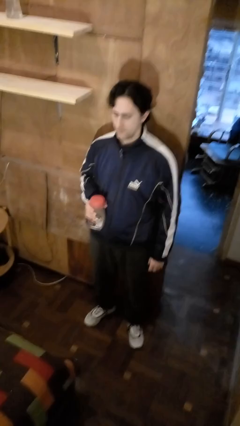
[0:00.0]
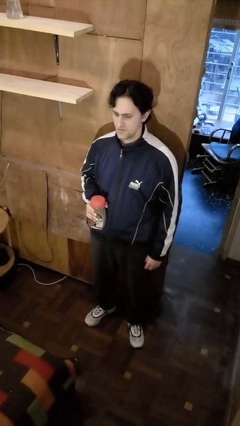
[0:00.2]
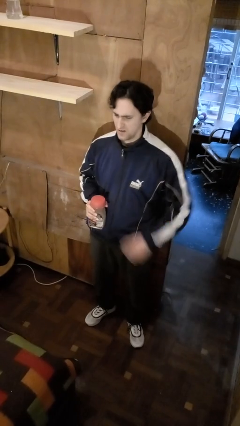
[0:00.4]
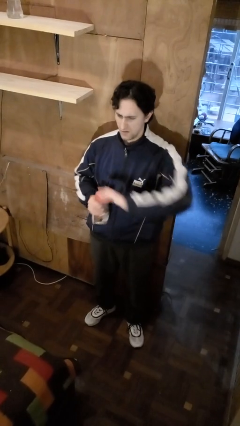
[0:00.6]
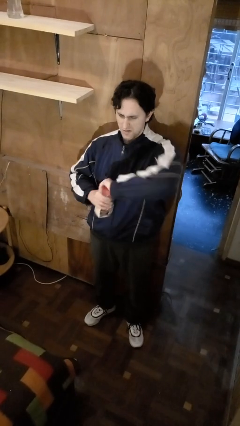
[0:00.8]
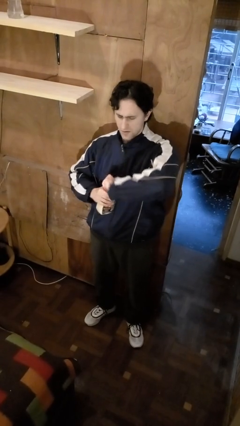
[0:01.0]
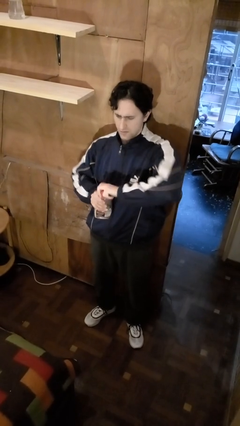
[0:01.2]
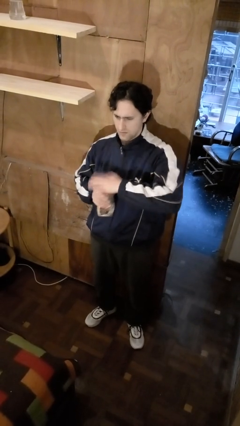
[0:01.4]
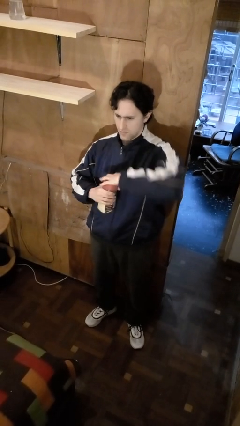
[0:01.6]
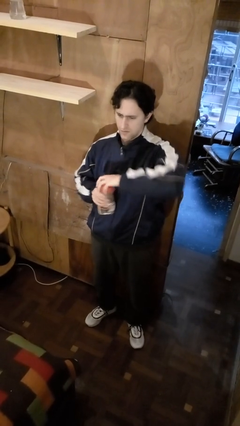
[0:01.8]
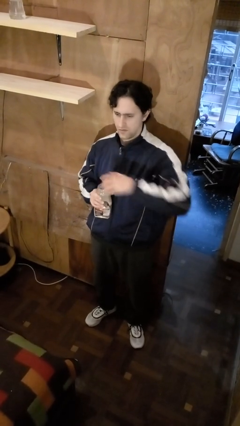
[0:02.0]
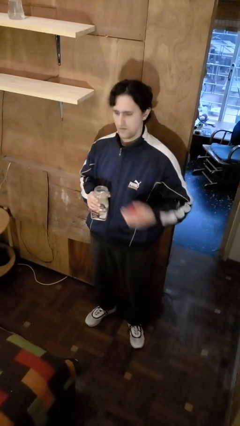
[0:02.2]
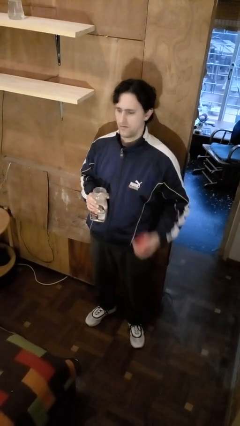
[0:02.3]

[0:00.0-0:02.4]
person opens jar

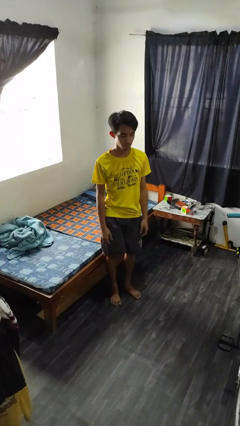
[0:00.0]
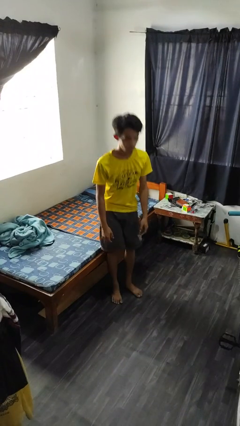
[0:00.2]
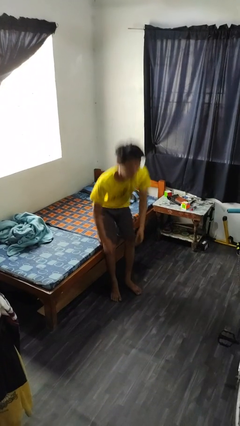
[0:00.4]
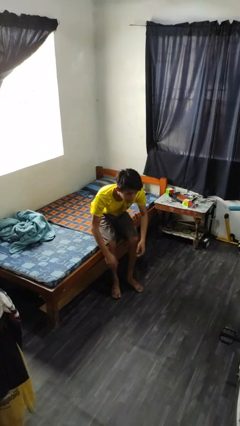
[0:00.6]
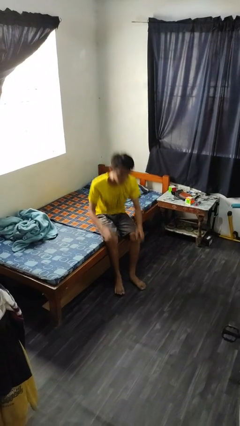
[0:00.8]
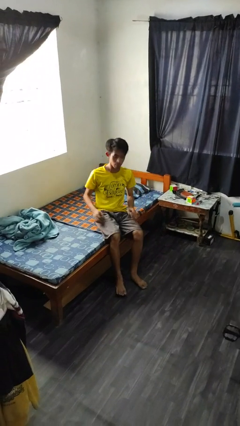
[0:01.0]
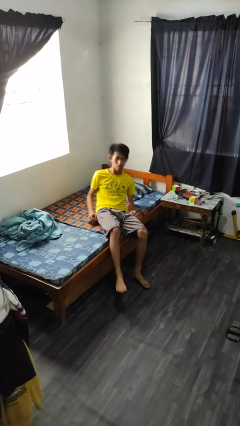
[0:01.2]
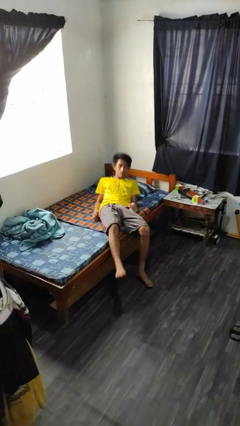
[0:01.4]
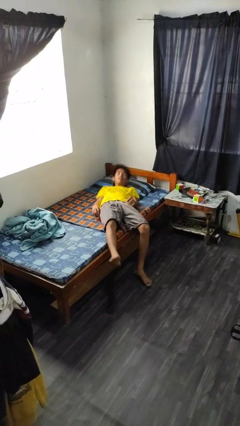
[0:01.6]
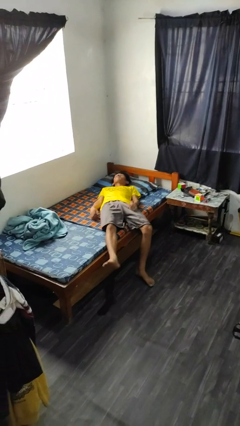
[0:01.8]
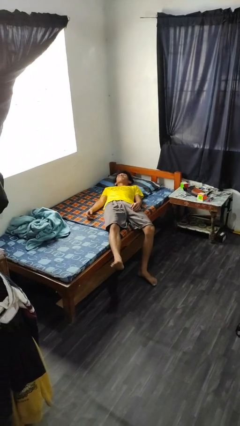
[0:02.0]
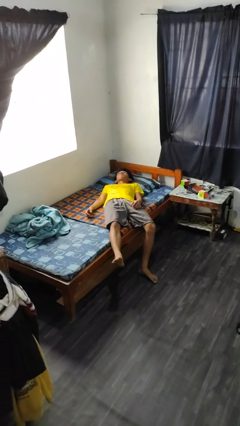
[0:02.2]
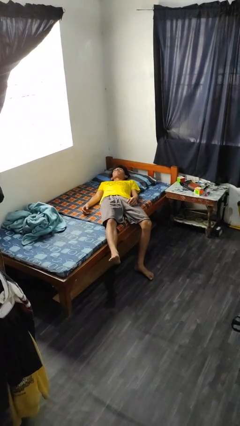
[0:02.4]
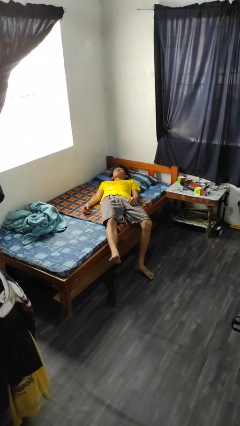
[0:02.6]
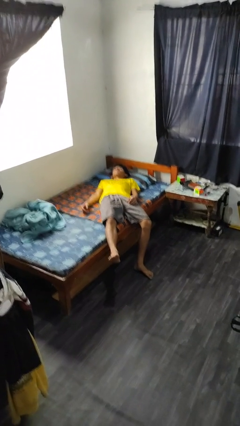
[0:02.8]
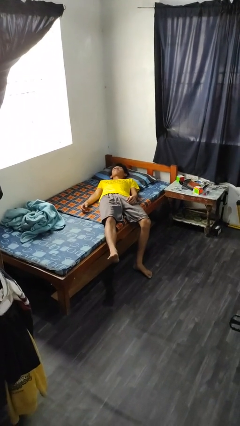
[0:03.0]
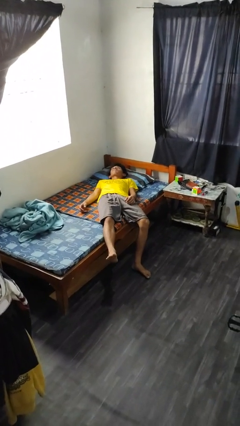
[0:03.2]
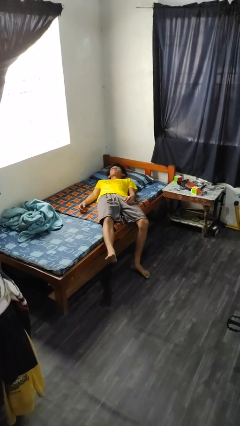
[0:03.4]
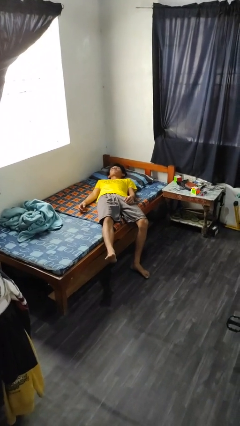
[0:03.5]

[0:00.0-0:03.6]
person lies down on bed

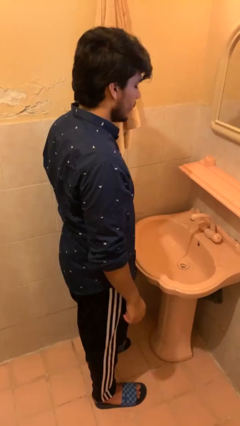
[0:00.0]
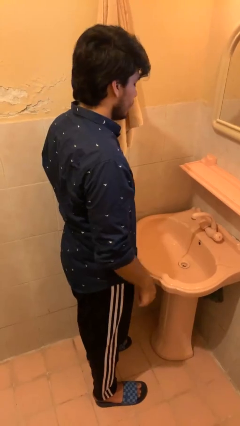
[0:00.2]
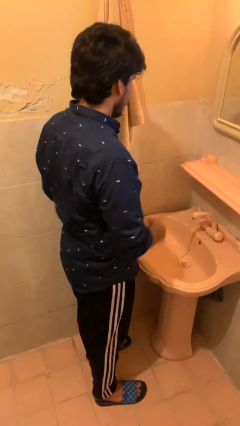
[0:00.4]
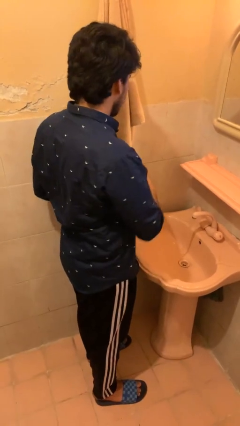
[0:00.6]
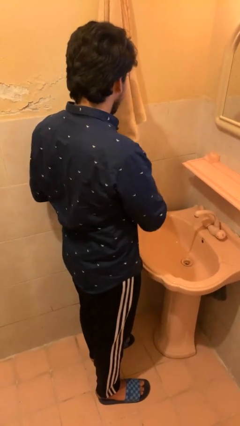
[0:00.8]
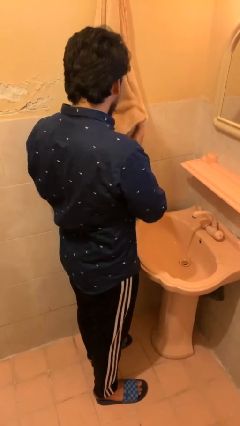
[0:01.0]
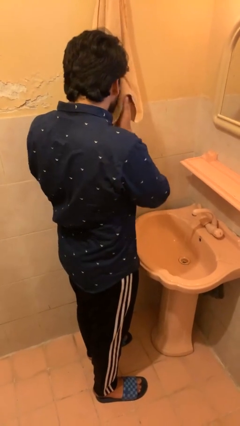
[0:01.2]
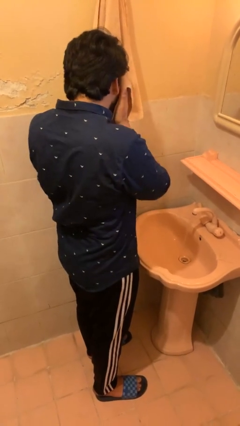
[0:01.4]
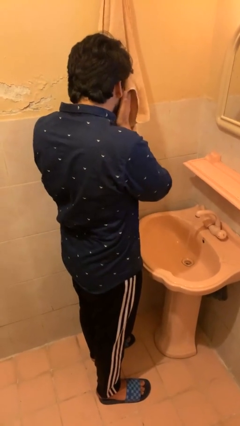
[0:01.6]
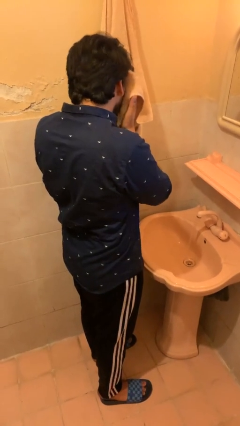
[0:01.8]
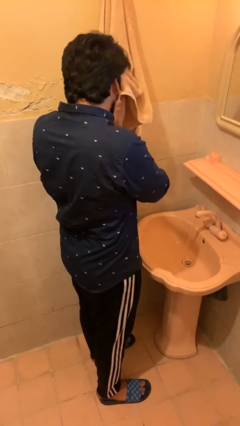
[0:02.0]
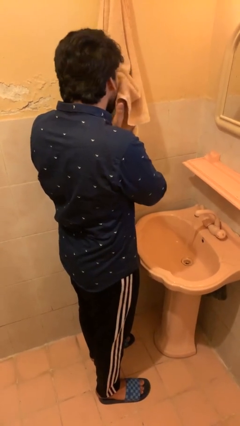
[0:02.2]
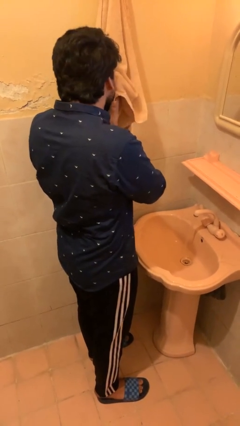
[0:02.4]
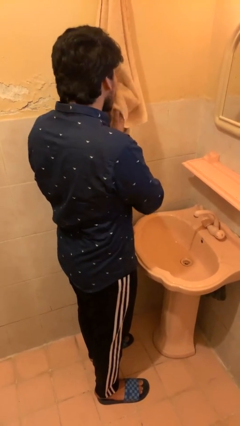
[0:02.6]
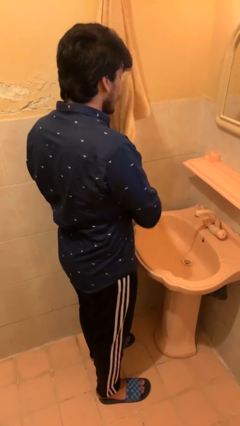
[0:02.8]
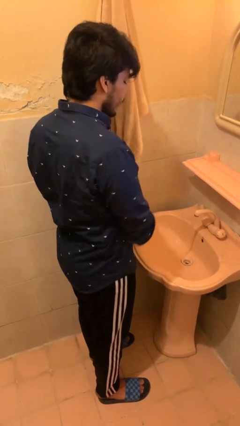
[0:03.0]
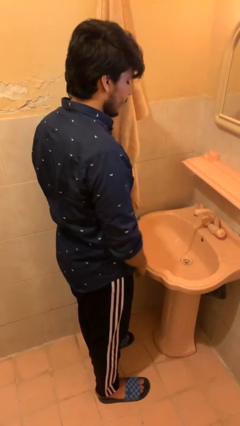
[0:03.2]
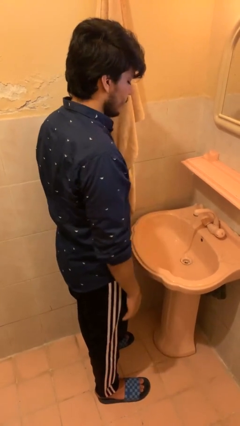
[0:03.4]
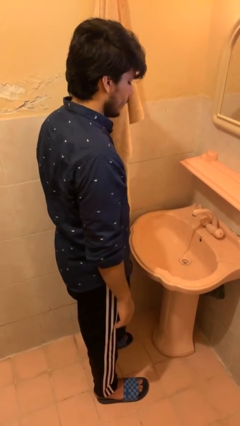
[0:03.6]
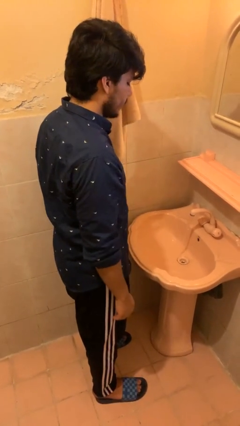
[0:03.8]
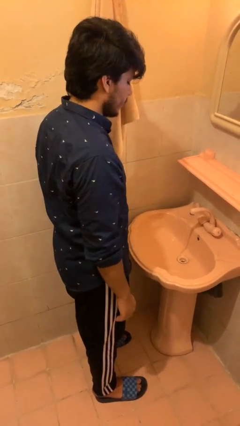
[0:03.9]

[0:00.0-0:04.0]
person dries face with towel

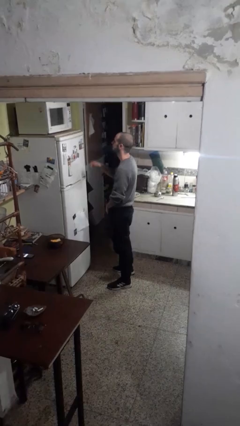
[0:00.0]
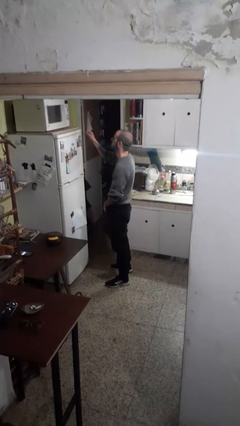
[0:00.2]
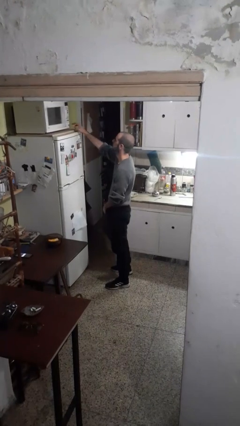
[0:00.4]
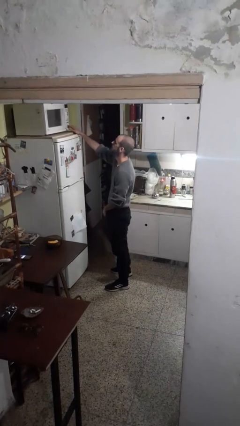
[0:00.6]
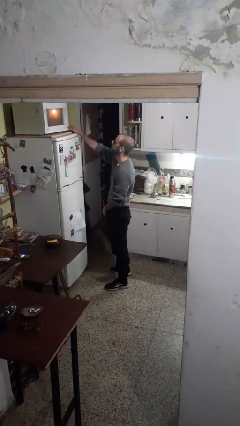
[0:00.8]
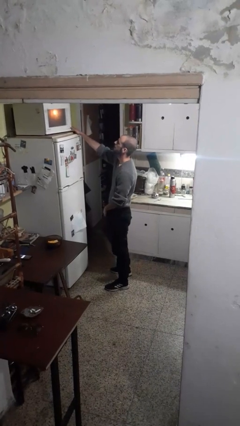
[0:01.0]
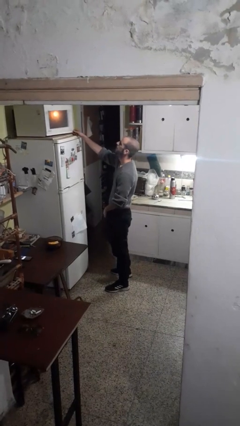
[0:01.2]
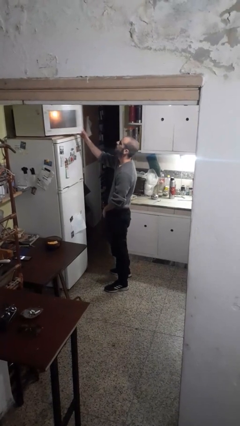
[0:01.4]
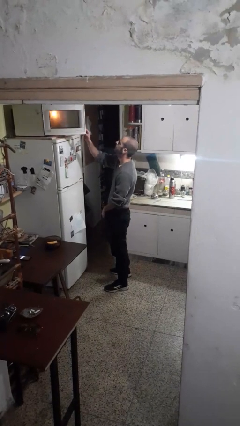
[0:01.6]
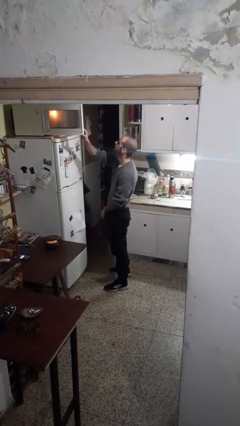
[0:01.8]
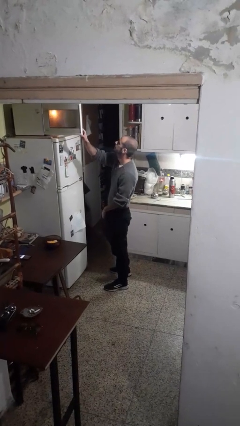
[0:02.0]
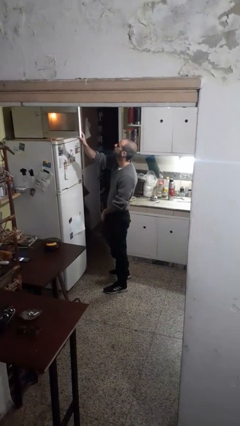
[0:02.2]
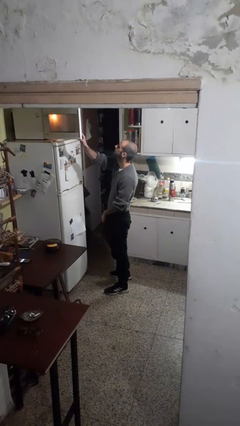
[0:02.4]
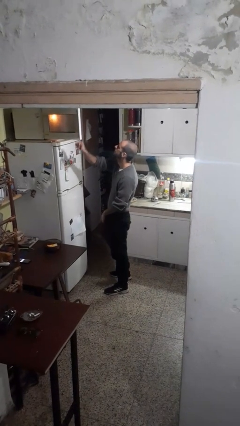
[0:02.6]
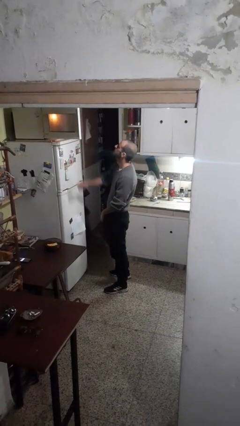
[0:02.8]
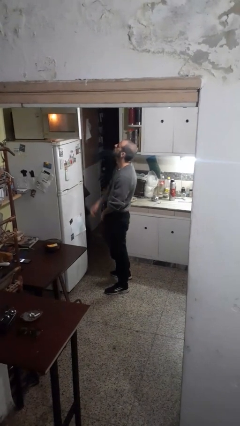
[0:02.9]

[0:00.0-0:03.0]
person opens microwave

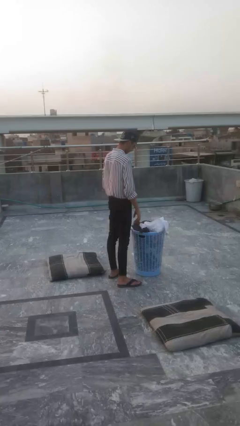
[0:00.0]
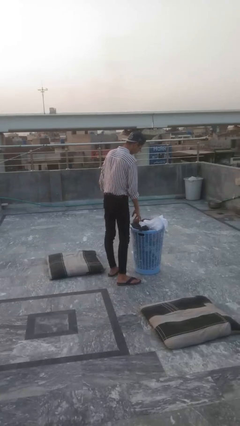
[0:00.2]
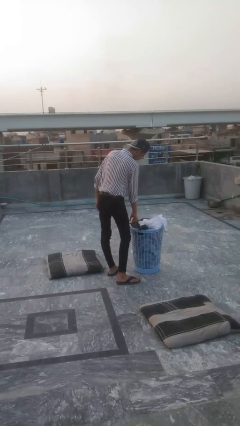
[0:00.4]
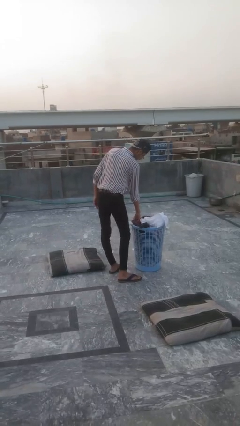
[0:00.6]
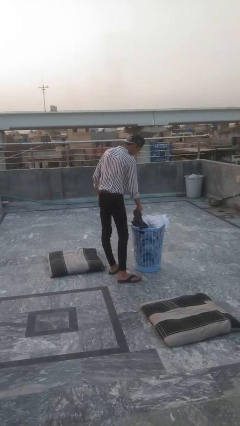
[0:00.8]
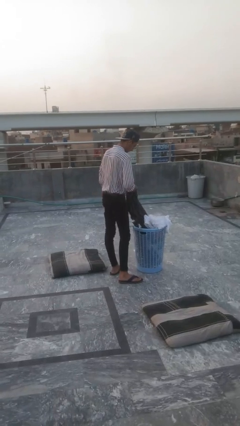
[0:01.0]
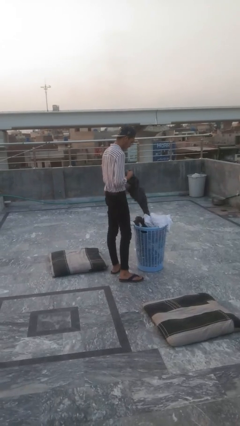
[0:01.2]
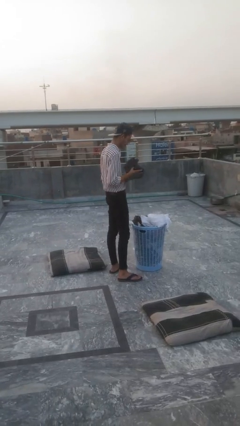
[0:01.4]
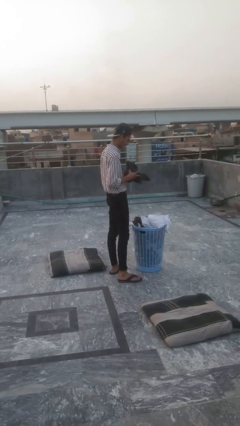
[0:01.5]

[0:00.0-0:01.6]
person takes object from basket

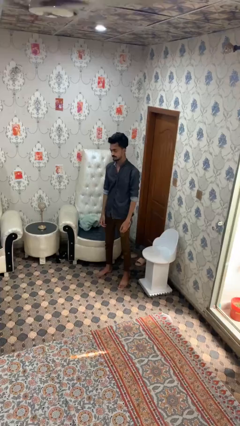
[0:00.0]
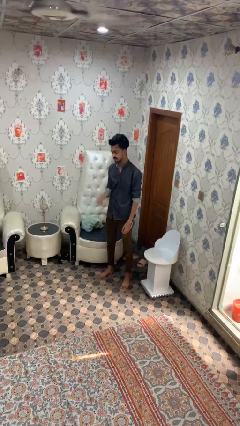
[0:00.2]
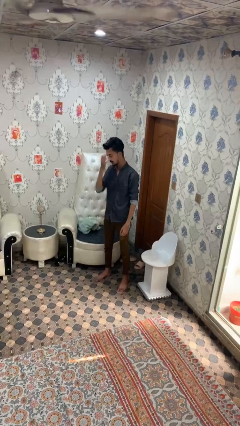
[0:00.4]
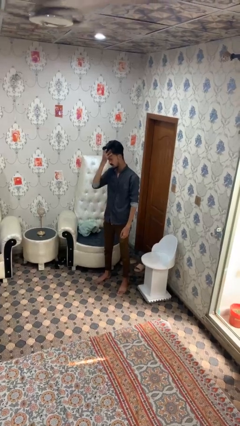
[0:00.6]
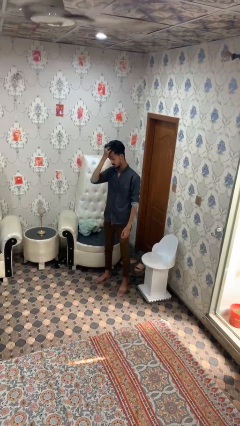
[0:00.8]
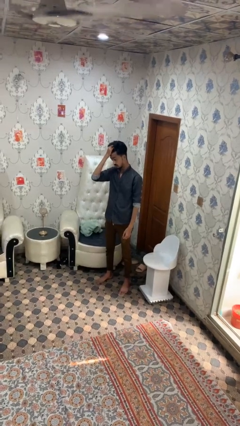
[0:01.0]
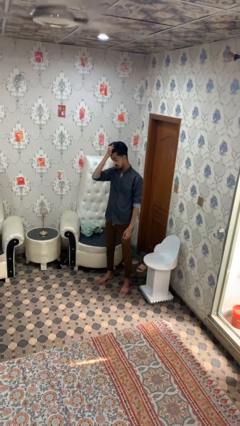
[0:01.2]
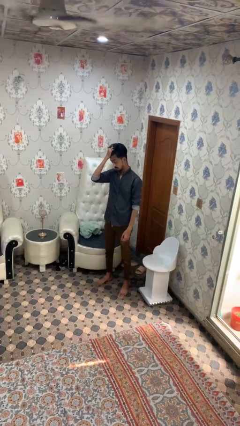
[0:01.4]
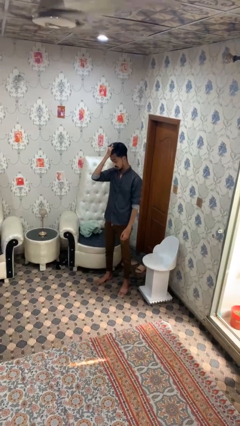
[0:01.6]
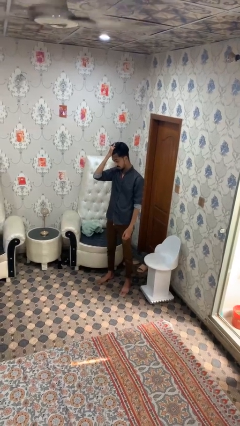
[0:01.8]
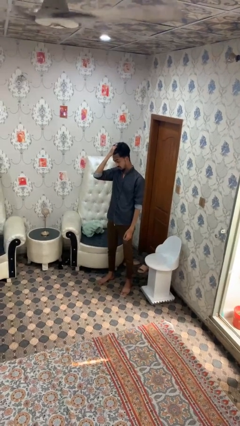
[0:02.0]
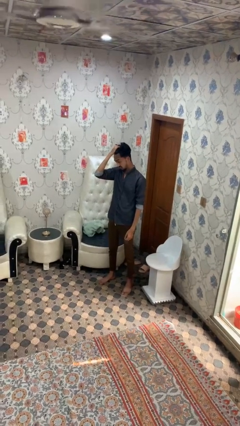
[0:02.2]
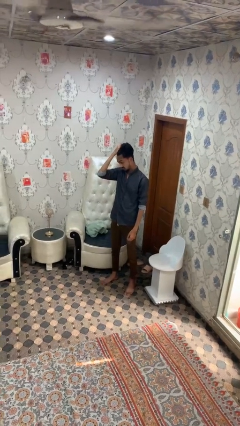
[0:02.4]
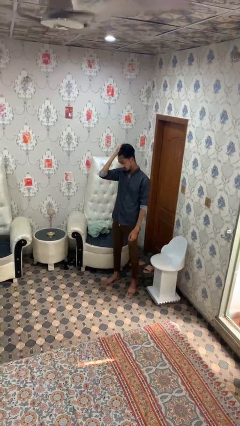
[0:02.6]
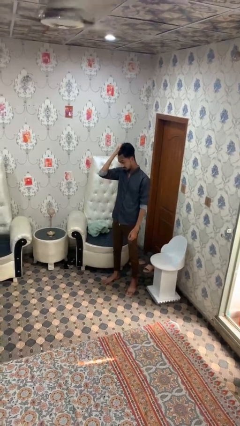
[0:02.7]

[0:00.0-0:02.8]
person strokes hair
